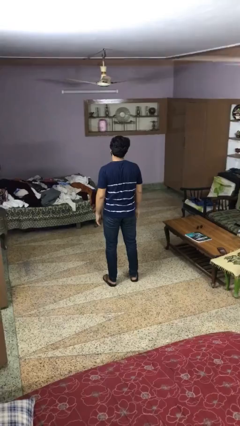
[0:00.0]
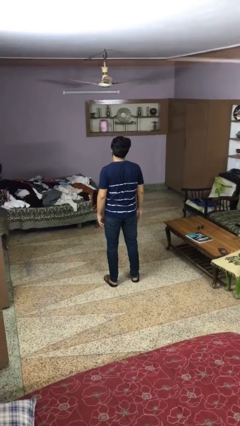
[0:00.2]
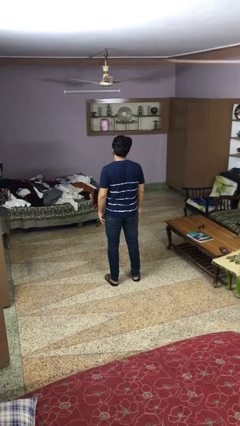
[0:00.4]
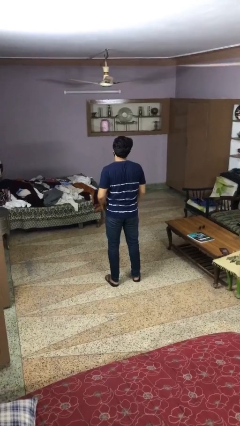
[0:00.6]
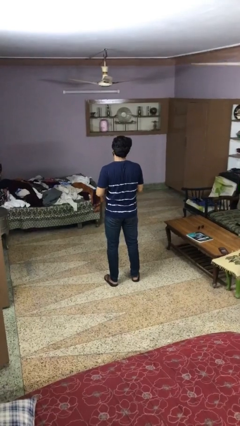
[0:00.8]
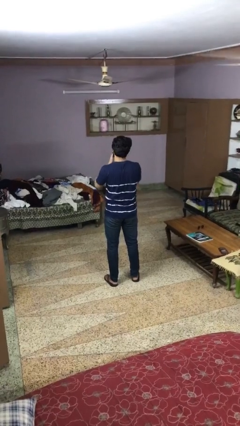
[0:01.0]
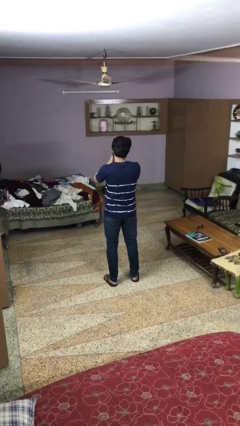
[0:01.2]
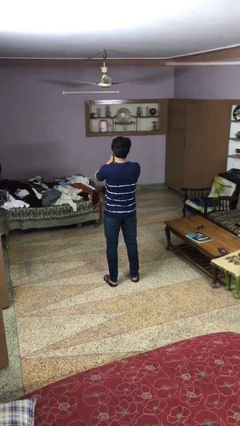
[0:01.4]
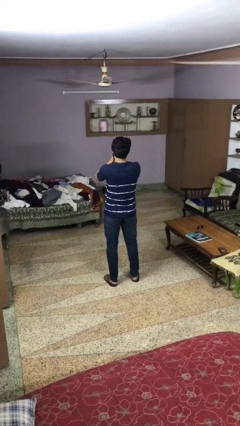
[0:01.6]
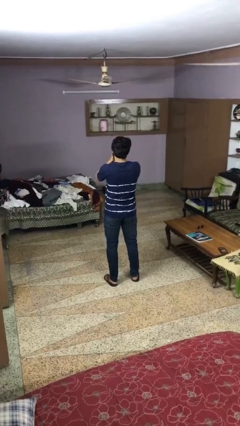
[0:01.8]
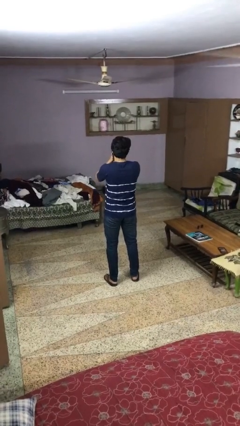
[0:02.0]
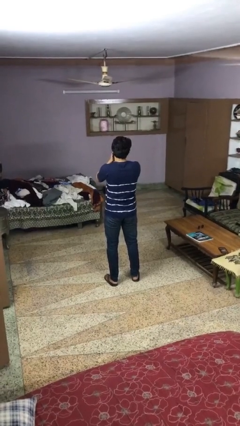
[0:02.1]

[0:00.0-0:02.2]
person covers face with hands

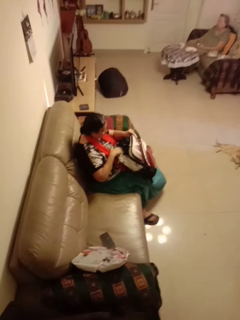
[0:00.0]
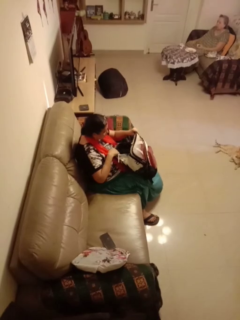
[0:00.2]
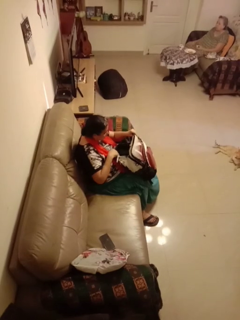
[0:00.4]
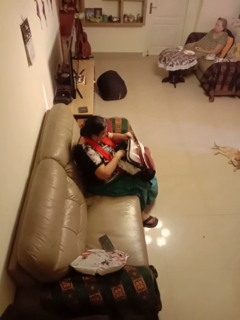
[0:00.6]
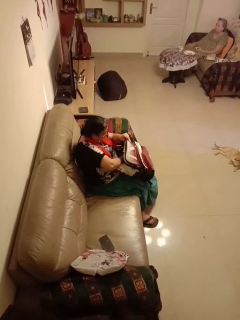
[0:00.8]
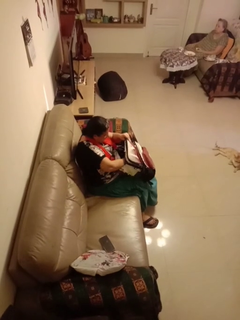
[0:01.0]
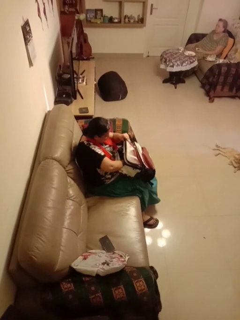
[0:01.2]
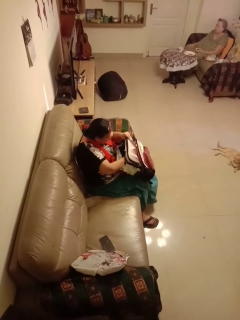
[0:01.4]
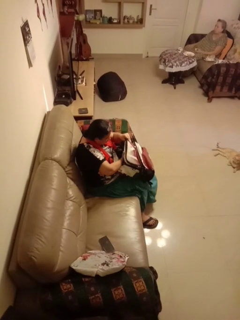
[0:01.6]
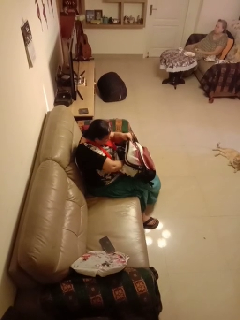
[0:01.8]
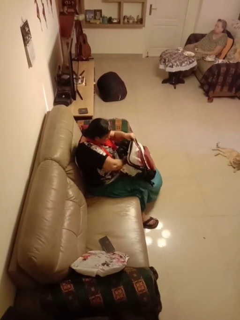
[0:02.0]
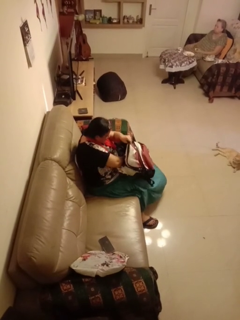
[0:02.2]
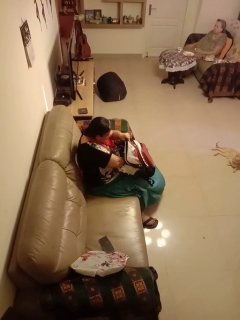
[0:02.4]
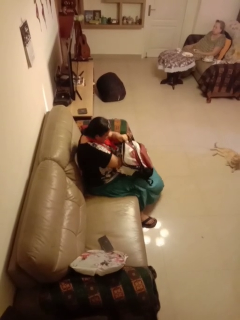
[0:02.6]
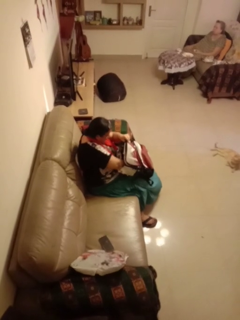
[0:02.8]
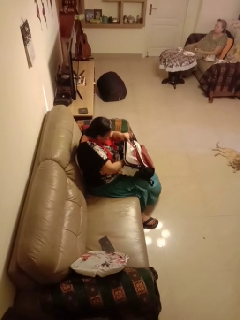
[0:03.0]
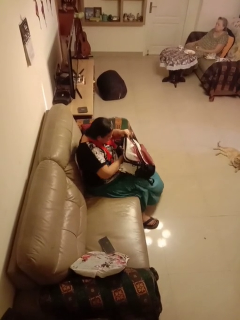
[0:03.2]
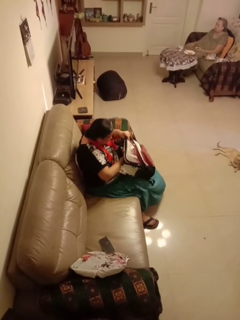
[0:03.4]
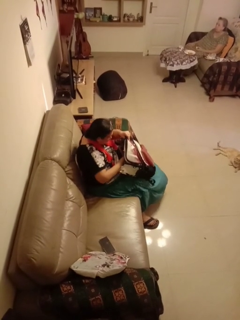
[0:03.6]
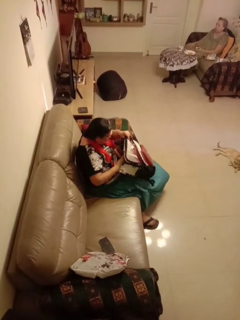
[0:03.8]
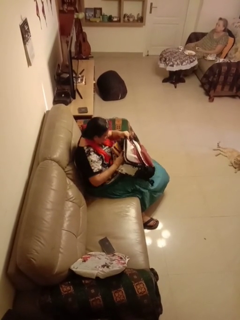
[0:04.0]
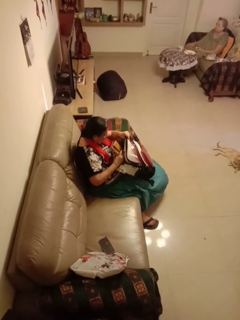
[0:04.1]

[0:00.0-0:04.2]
person searches in backpack

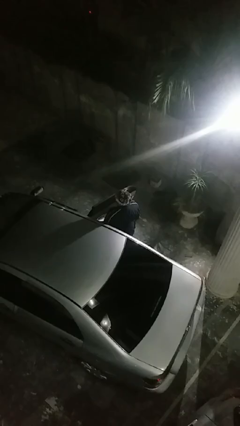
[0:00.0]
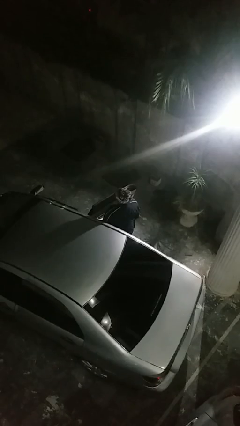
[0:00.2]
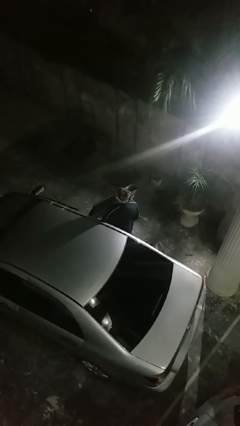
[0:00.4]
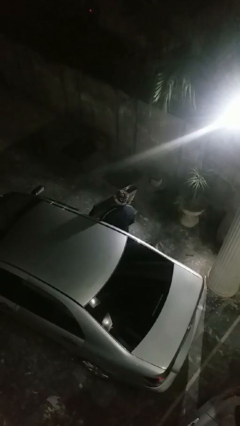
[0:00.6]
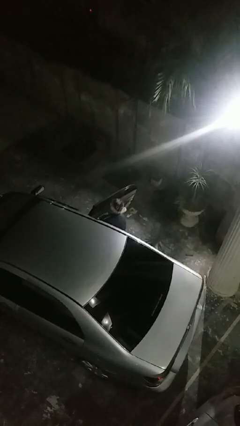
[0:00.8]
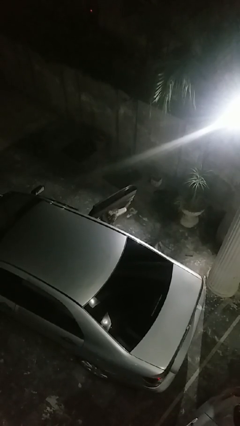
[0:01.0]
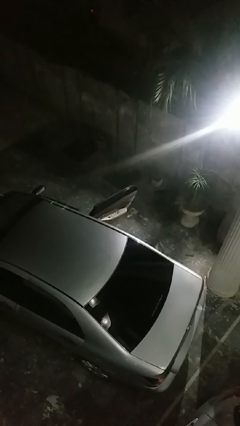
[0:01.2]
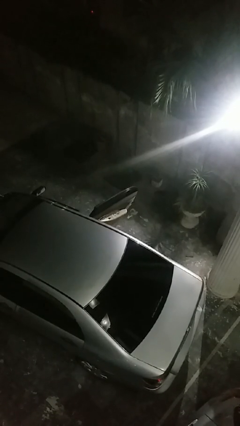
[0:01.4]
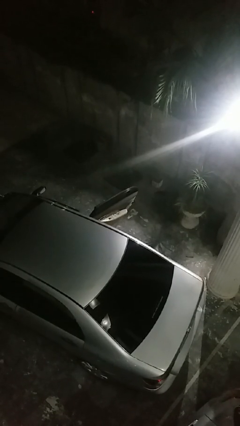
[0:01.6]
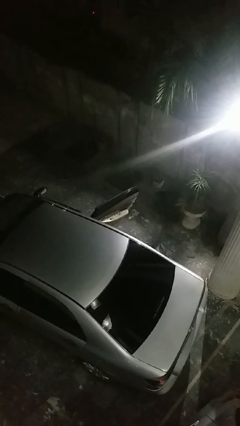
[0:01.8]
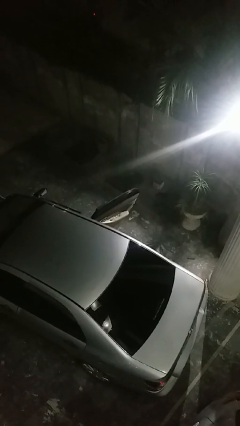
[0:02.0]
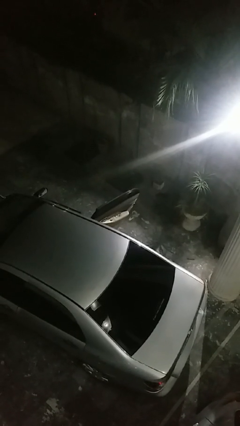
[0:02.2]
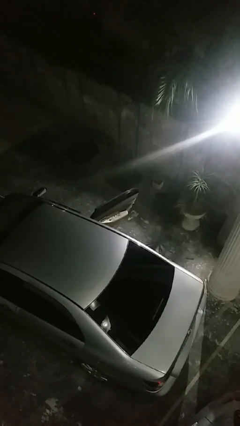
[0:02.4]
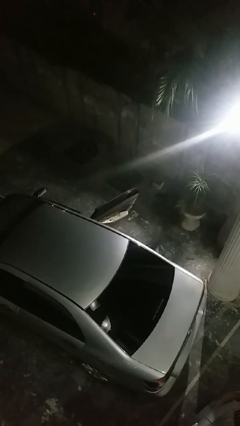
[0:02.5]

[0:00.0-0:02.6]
person enters car

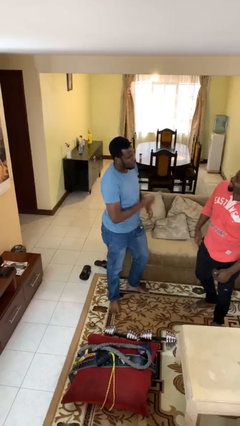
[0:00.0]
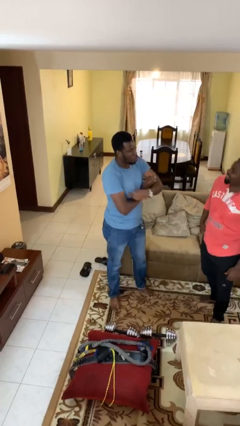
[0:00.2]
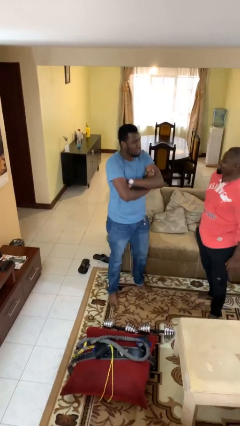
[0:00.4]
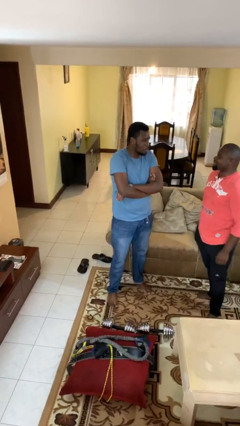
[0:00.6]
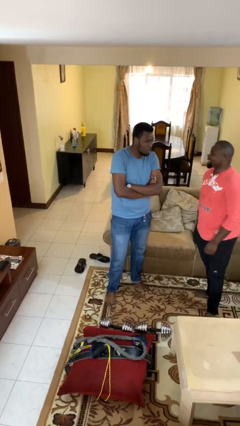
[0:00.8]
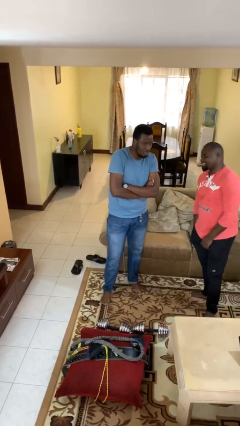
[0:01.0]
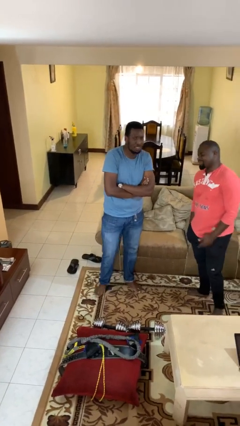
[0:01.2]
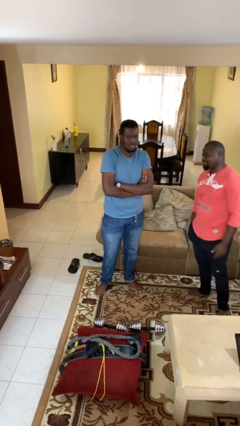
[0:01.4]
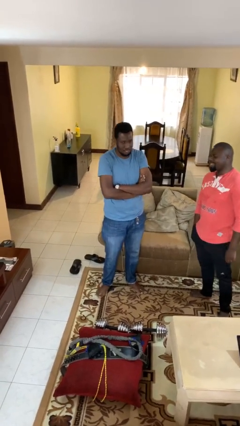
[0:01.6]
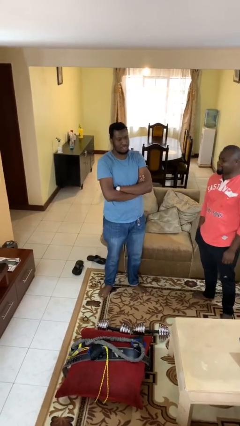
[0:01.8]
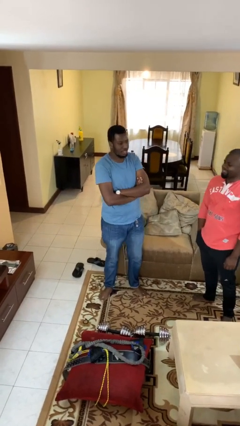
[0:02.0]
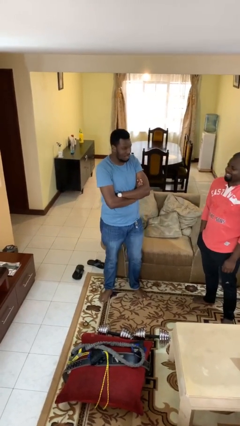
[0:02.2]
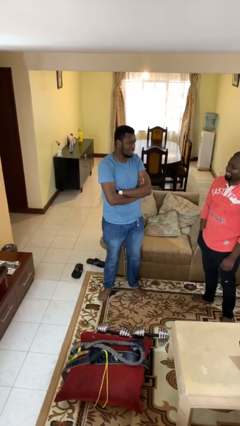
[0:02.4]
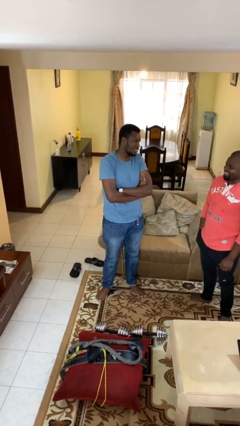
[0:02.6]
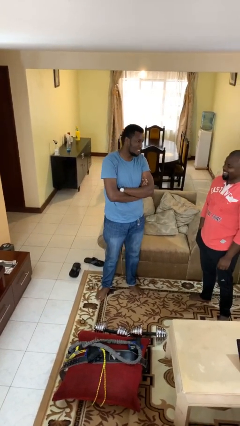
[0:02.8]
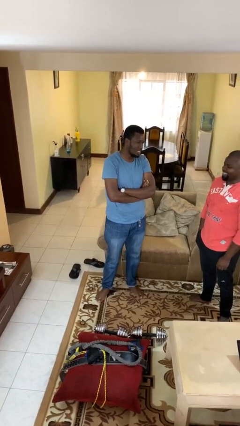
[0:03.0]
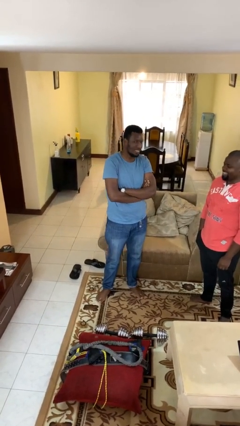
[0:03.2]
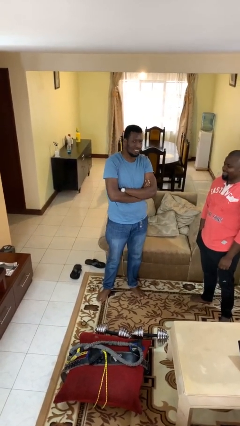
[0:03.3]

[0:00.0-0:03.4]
person talks to person

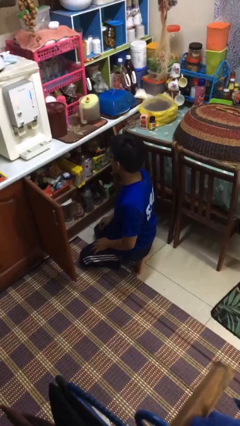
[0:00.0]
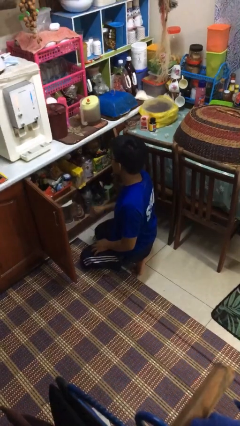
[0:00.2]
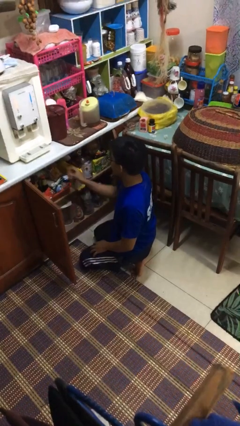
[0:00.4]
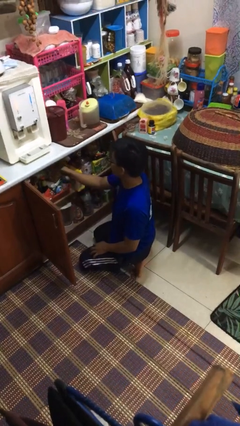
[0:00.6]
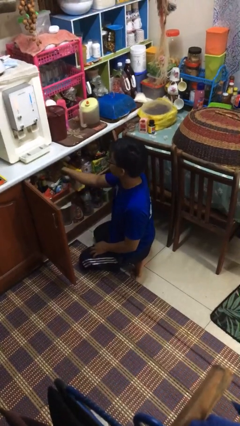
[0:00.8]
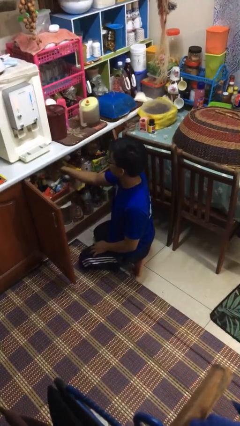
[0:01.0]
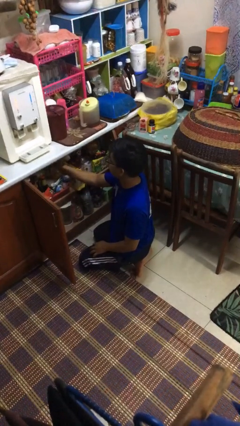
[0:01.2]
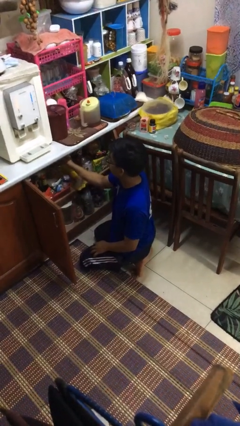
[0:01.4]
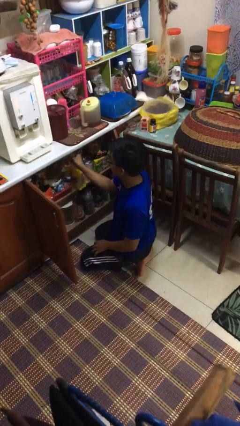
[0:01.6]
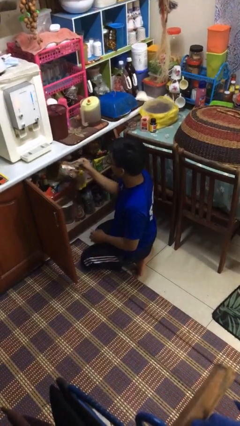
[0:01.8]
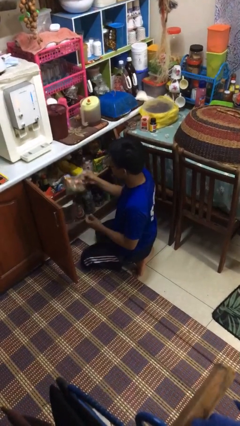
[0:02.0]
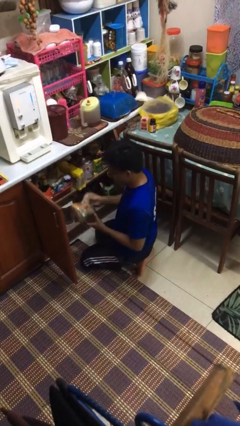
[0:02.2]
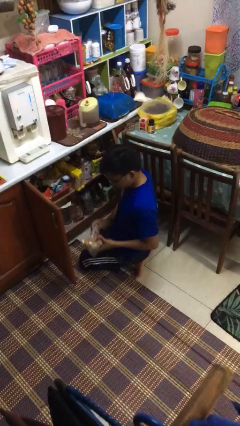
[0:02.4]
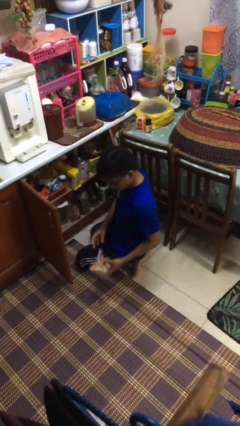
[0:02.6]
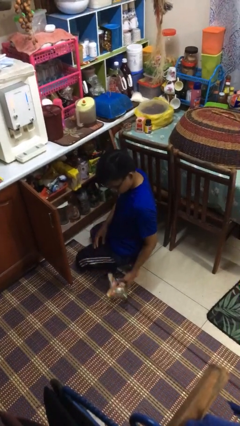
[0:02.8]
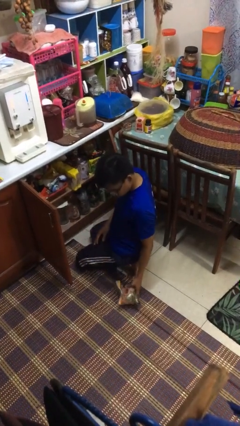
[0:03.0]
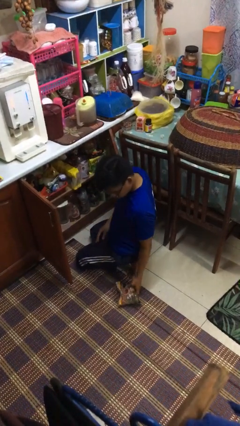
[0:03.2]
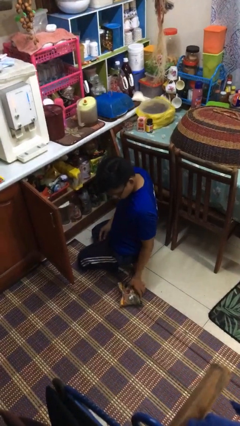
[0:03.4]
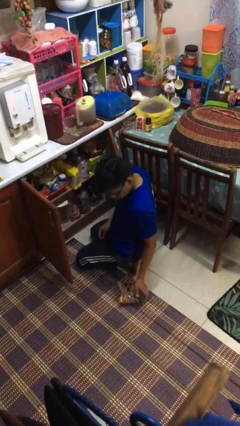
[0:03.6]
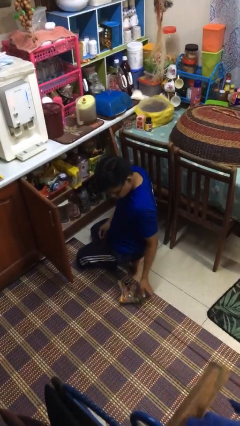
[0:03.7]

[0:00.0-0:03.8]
person takes object from cabinet

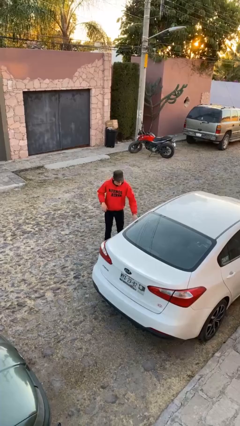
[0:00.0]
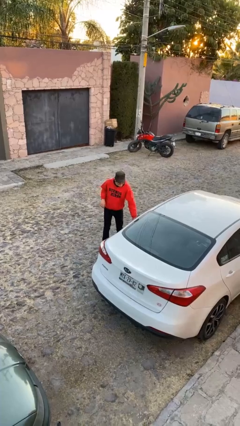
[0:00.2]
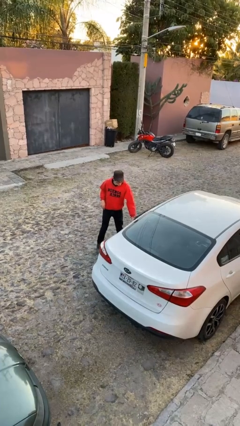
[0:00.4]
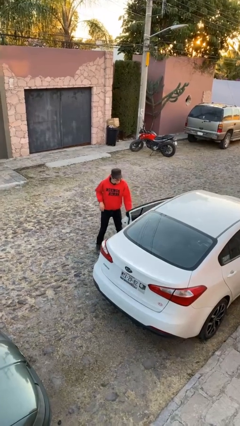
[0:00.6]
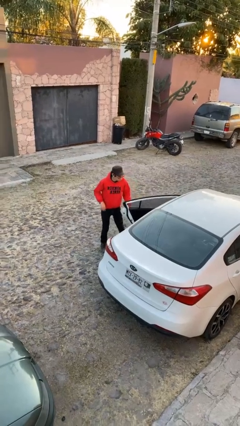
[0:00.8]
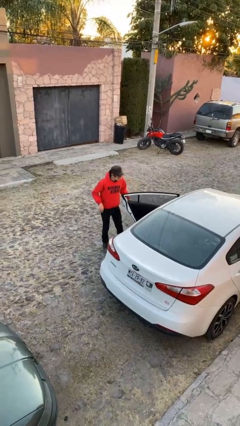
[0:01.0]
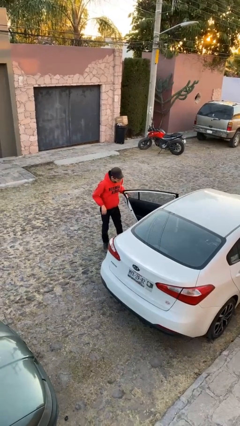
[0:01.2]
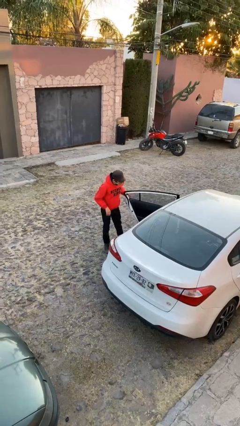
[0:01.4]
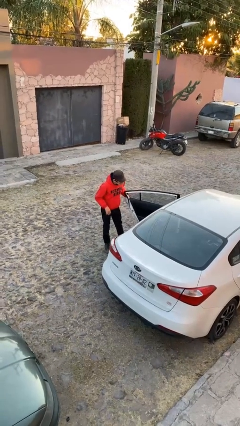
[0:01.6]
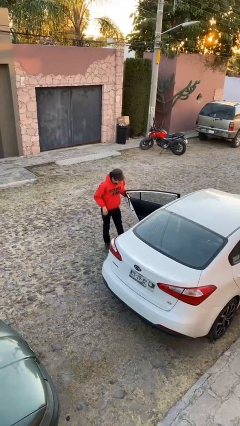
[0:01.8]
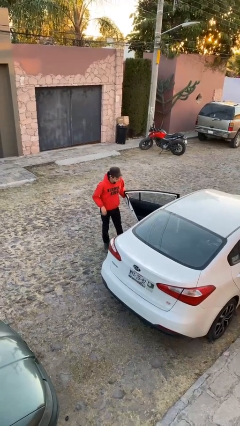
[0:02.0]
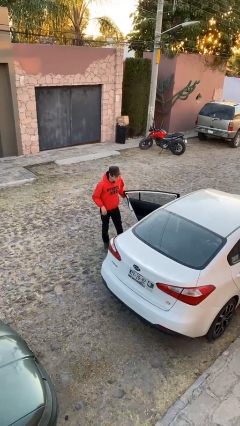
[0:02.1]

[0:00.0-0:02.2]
person opens car door
